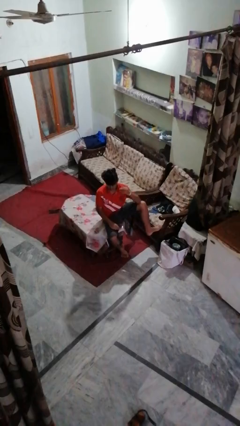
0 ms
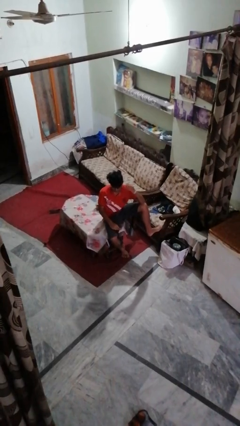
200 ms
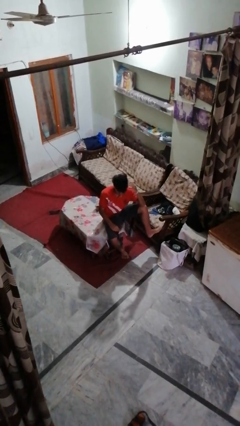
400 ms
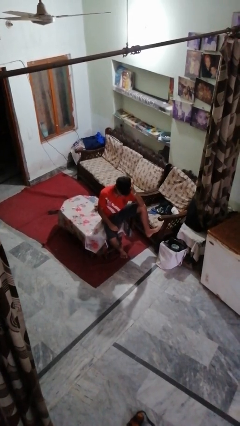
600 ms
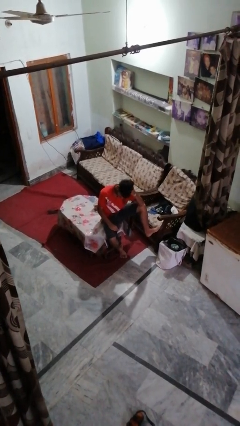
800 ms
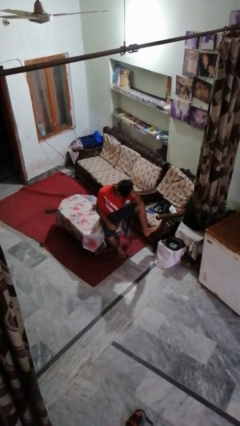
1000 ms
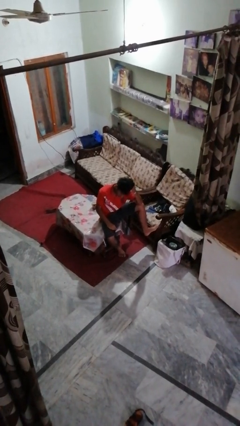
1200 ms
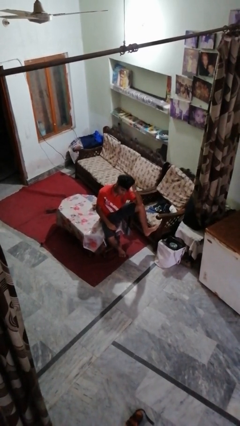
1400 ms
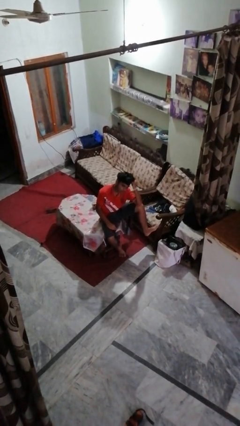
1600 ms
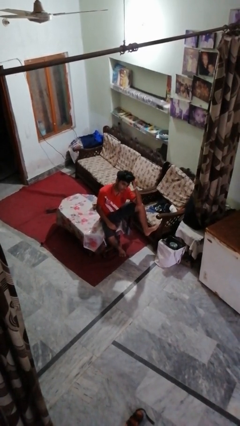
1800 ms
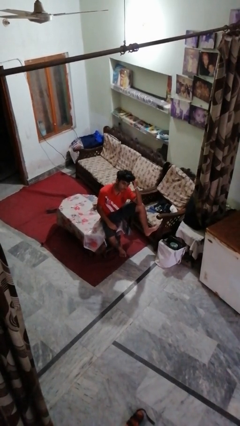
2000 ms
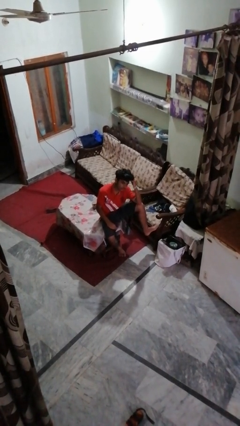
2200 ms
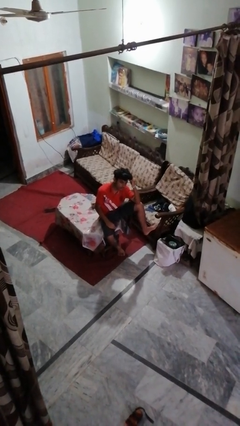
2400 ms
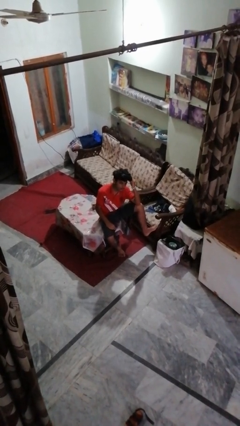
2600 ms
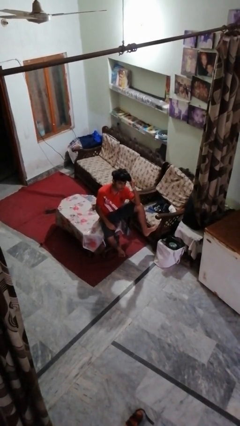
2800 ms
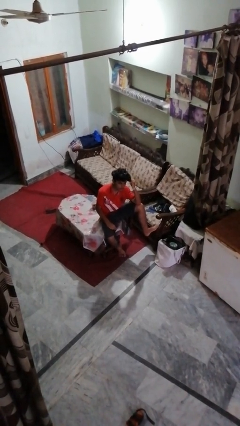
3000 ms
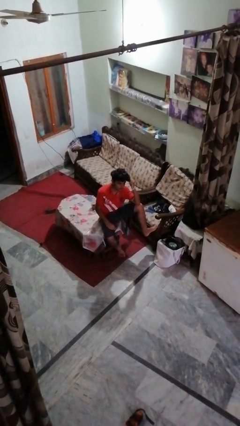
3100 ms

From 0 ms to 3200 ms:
person strokes hair

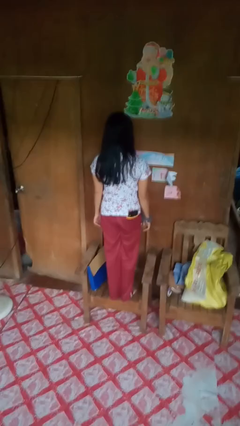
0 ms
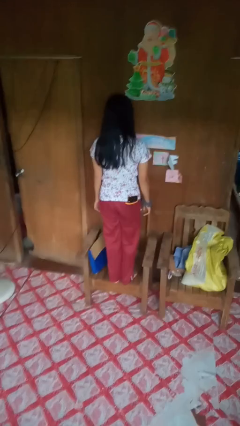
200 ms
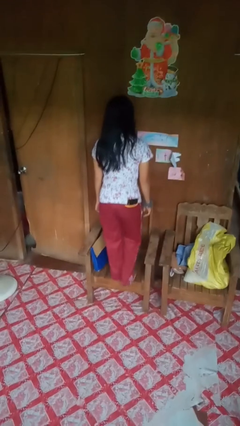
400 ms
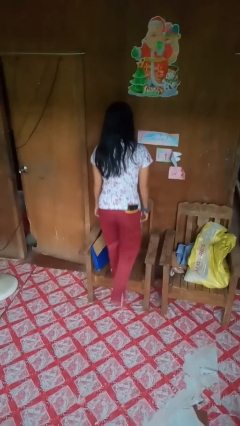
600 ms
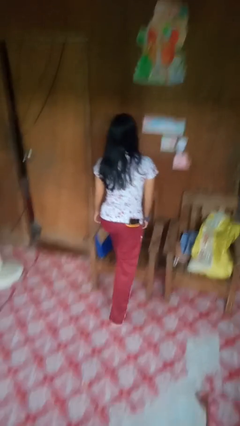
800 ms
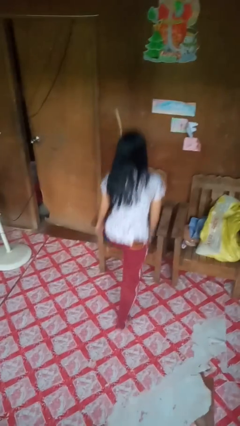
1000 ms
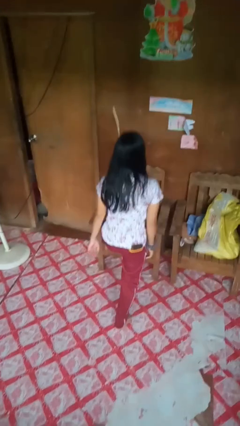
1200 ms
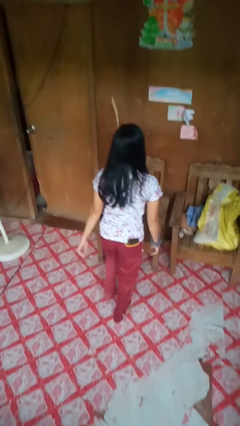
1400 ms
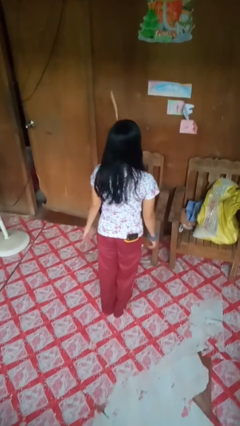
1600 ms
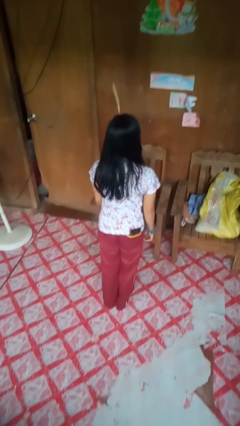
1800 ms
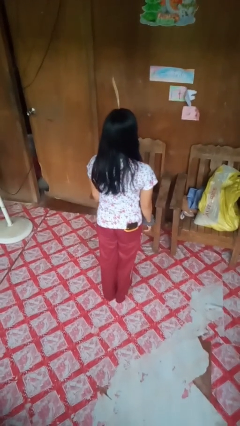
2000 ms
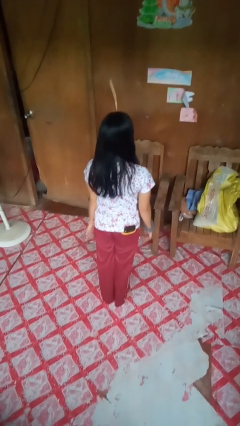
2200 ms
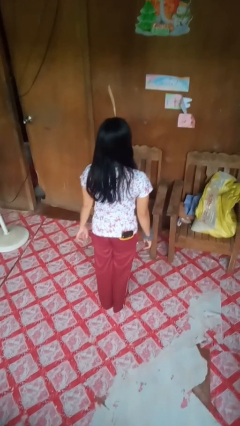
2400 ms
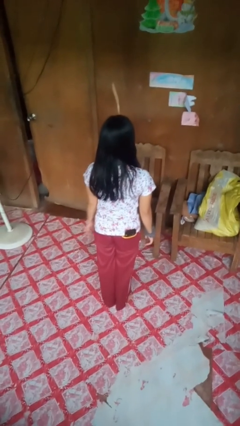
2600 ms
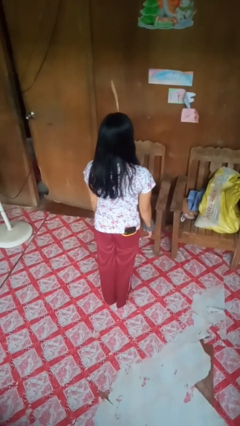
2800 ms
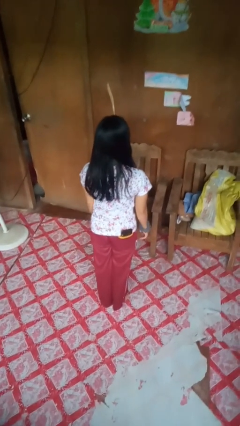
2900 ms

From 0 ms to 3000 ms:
person climbs off chair

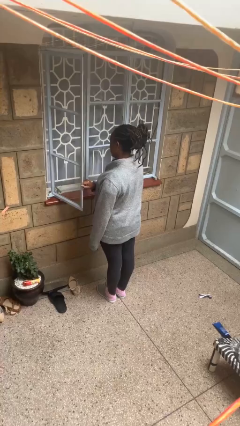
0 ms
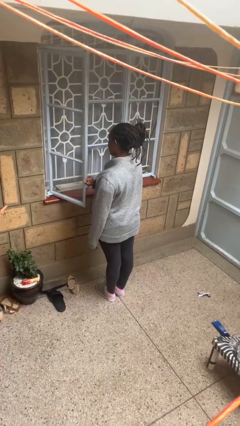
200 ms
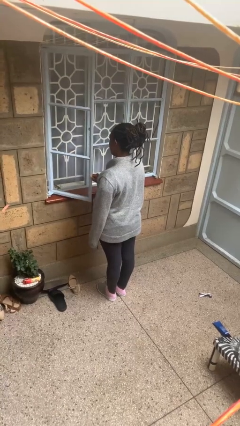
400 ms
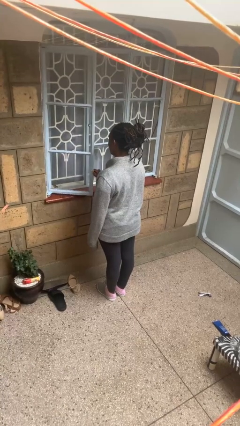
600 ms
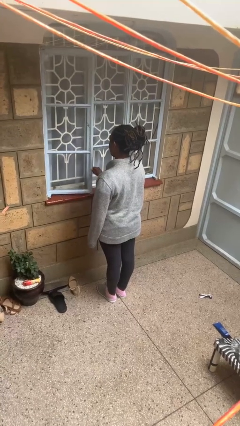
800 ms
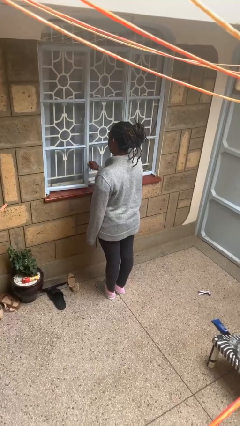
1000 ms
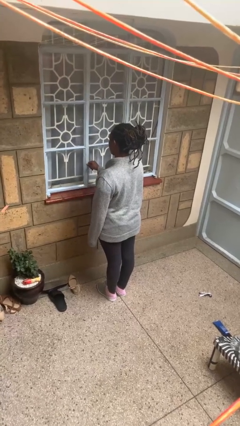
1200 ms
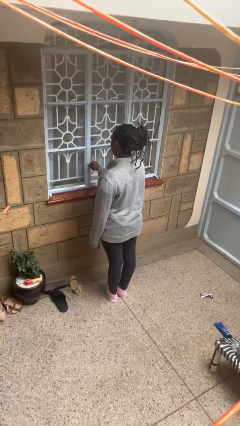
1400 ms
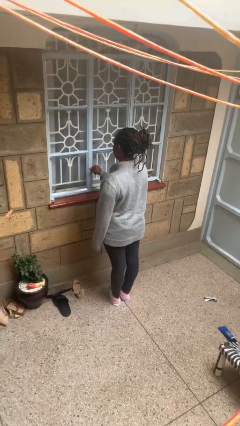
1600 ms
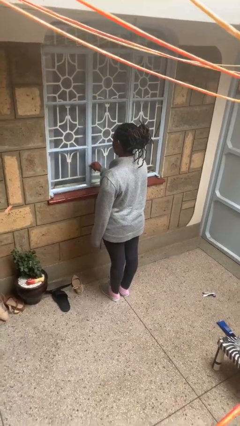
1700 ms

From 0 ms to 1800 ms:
person closes home window

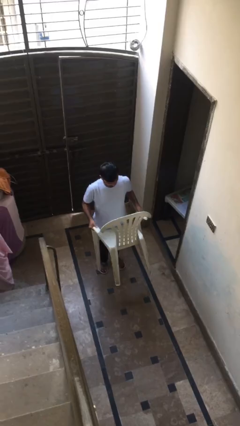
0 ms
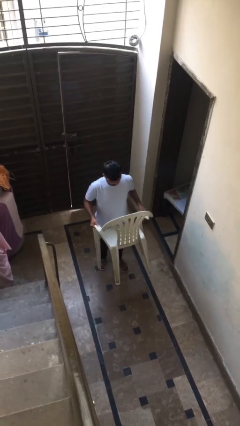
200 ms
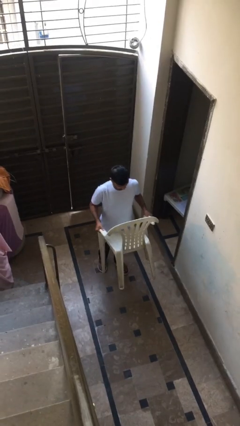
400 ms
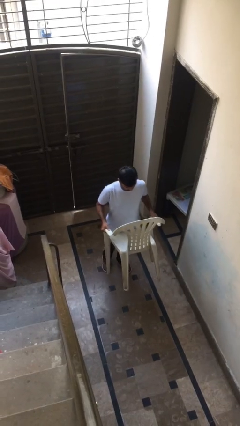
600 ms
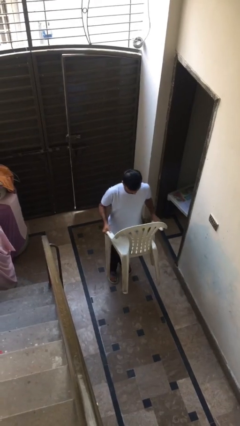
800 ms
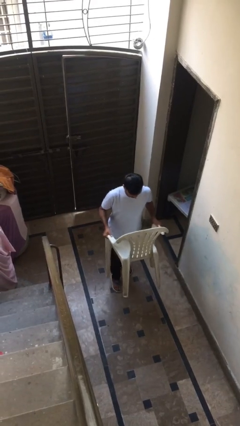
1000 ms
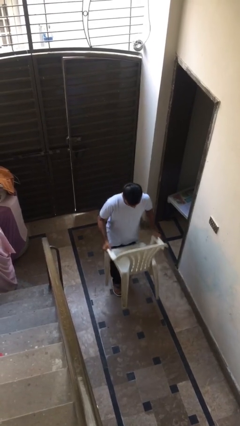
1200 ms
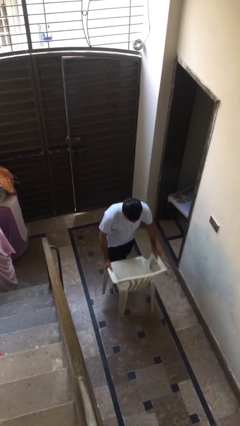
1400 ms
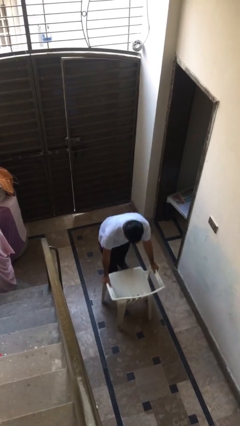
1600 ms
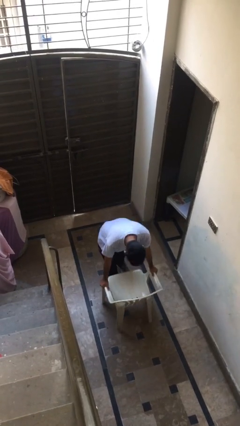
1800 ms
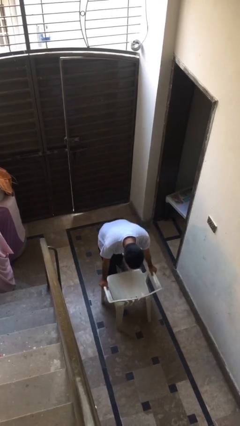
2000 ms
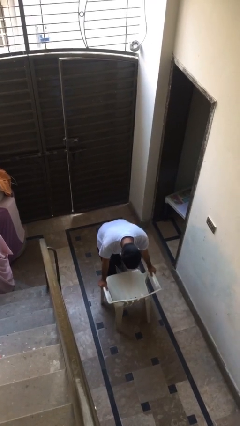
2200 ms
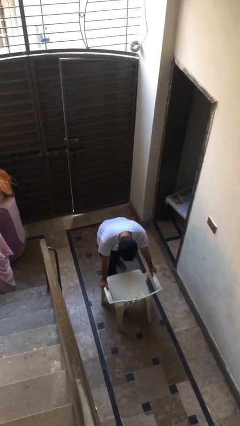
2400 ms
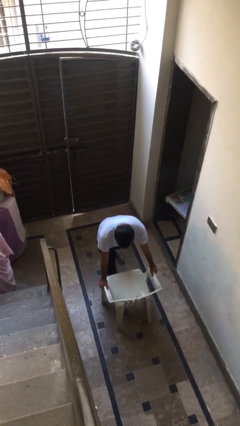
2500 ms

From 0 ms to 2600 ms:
person puts down object on floor

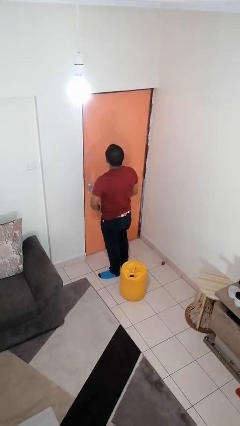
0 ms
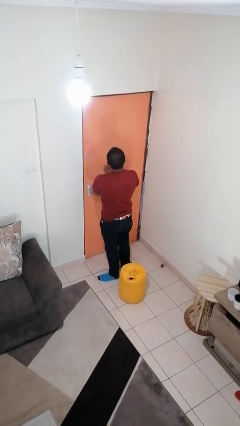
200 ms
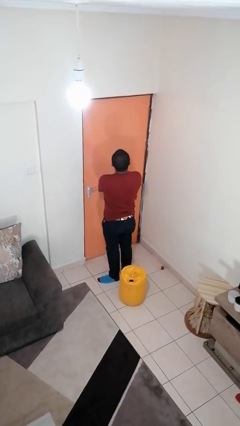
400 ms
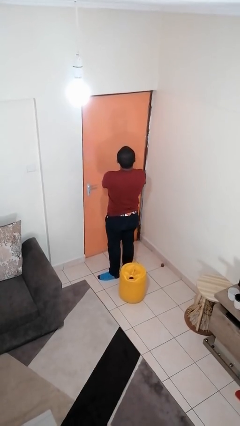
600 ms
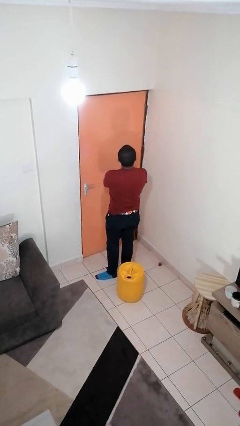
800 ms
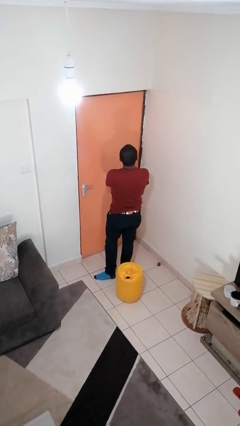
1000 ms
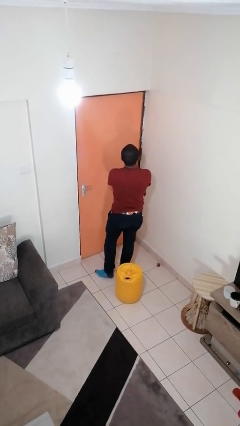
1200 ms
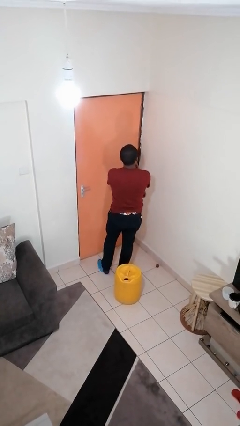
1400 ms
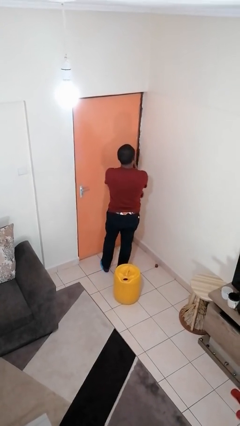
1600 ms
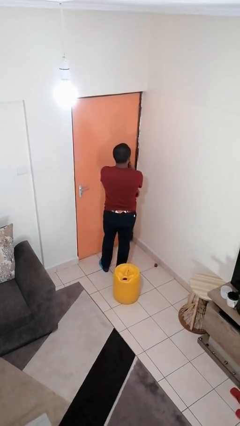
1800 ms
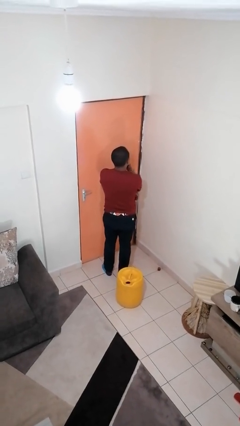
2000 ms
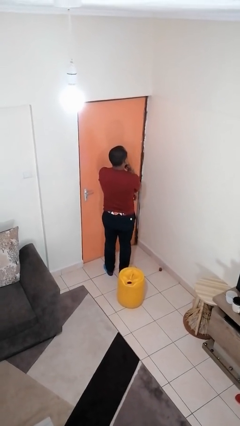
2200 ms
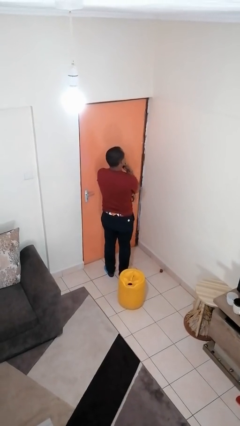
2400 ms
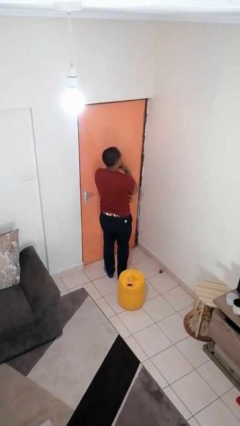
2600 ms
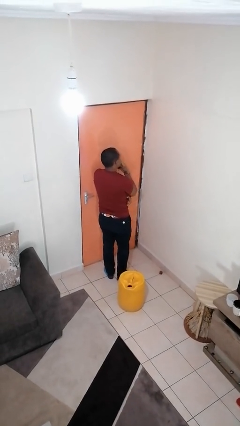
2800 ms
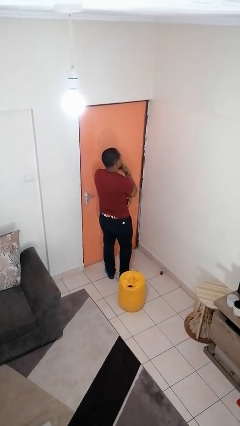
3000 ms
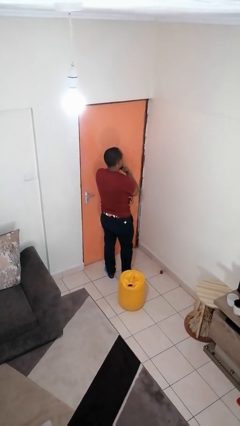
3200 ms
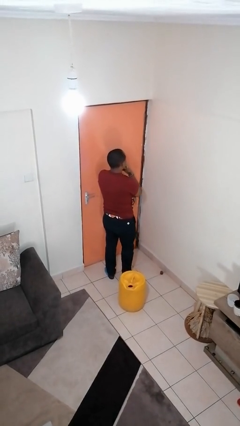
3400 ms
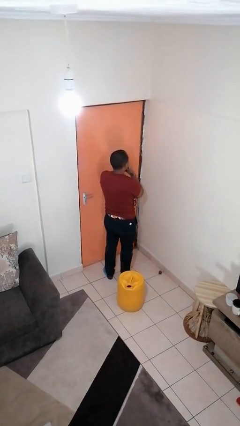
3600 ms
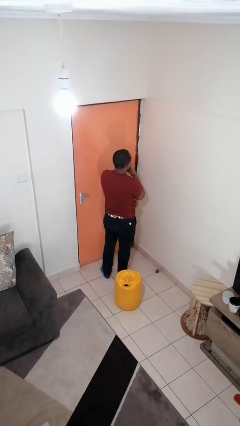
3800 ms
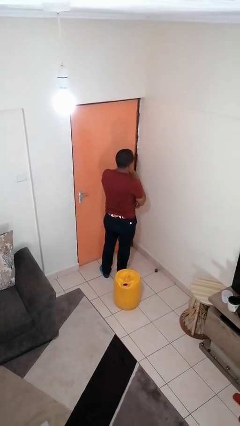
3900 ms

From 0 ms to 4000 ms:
person strokes chin

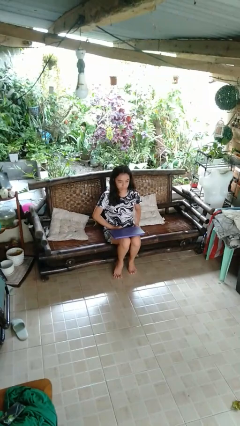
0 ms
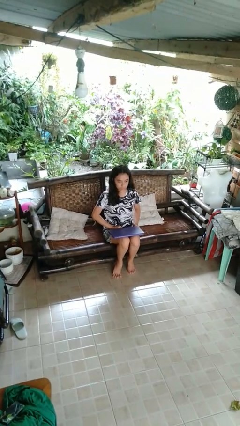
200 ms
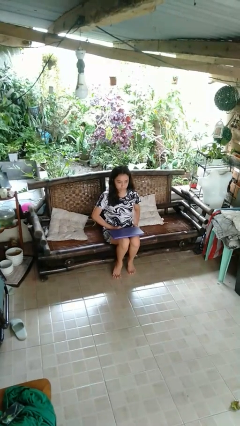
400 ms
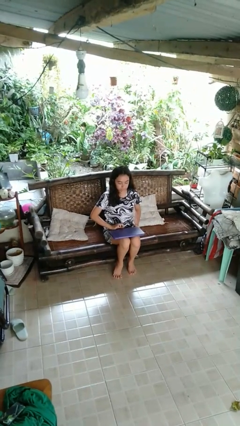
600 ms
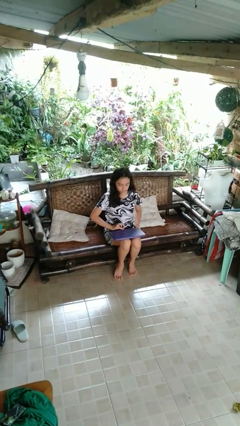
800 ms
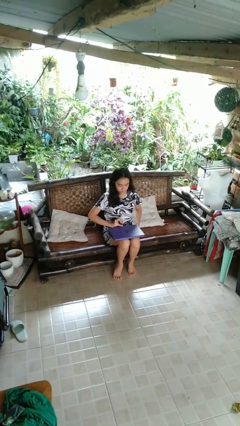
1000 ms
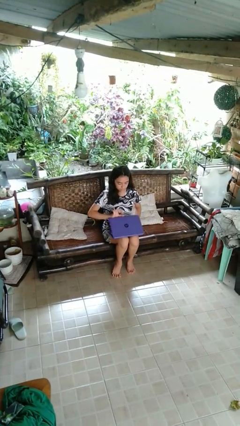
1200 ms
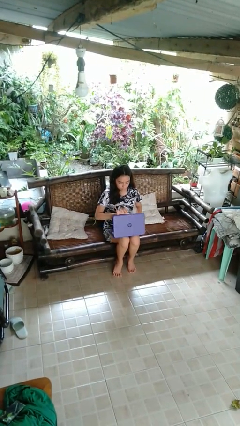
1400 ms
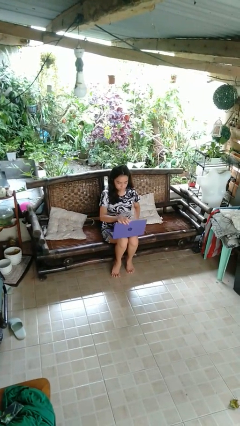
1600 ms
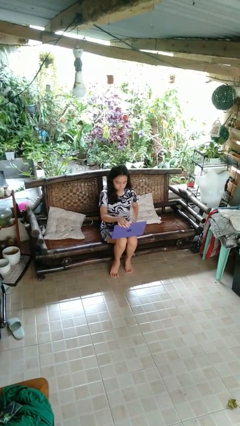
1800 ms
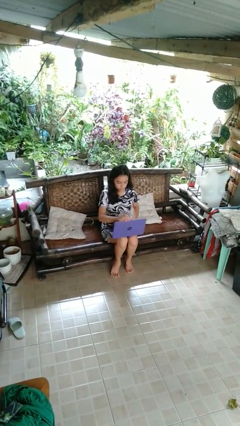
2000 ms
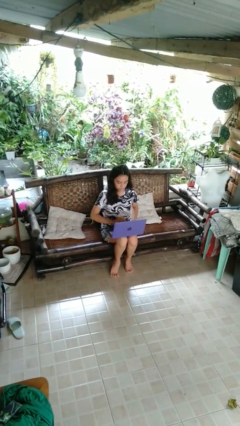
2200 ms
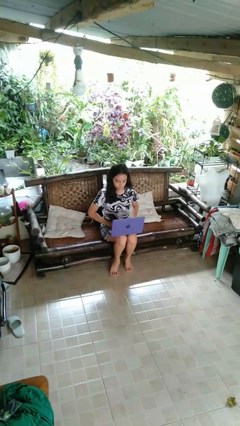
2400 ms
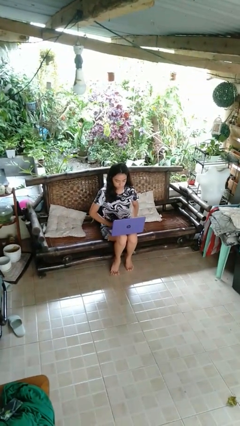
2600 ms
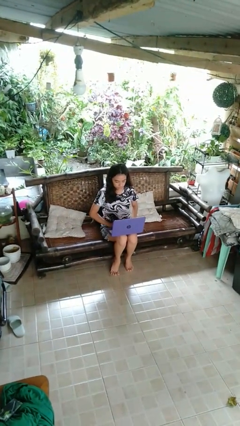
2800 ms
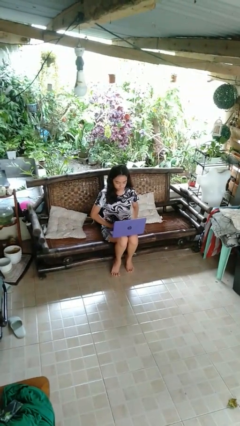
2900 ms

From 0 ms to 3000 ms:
person opens laptop
